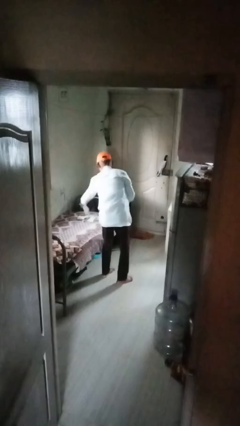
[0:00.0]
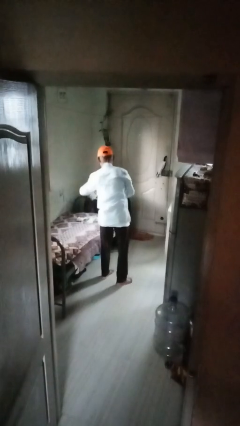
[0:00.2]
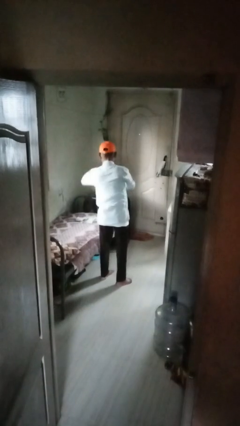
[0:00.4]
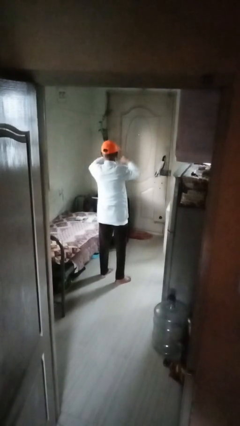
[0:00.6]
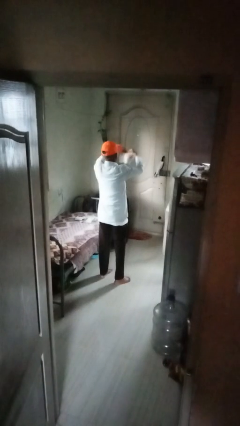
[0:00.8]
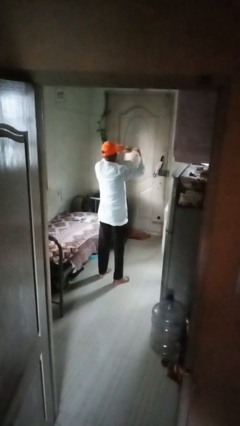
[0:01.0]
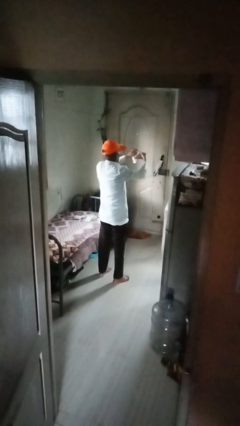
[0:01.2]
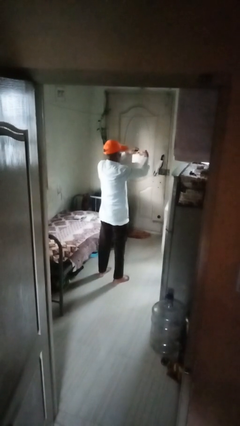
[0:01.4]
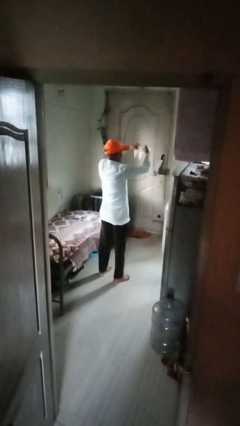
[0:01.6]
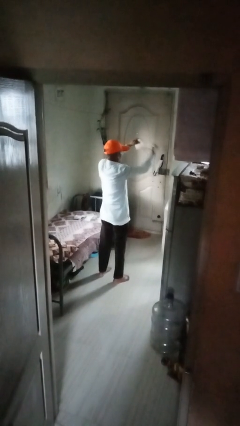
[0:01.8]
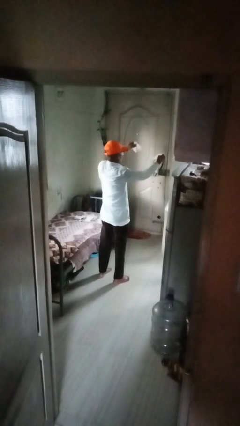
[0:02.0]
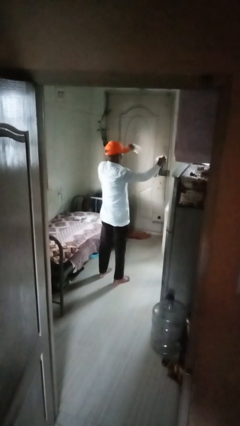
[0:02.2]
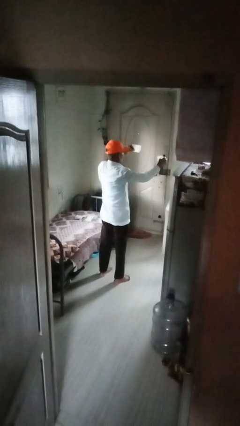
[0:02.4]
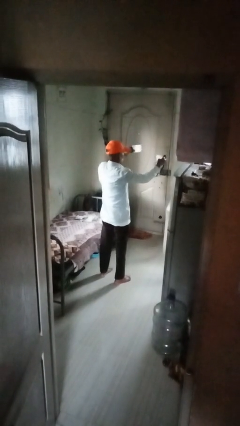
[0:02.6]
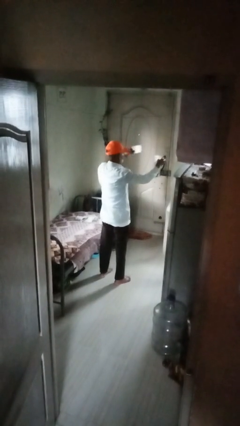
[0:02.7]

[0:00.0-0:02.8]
person tears paper

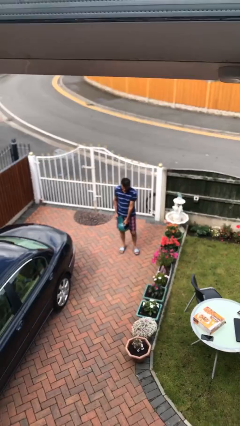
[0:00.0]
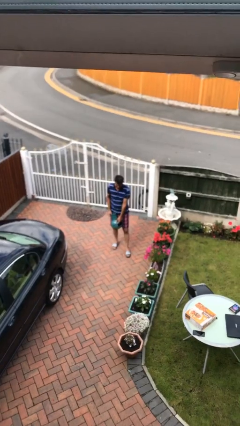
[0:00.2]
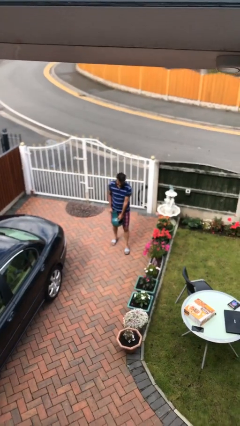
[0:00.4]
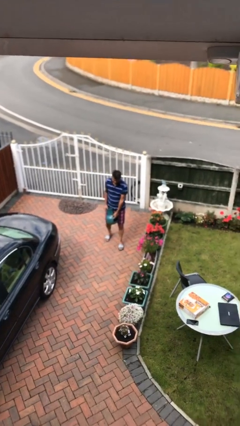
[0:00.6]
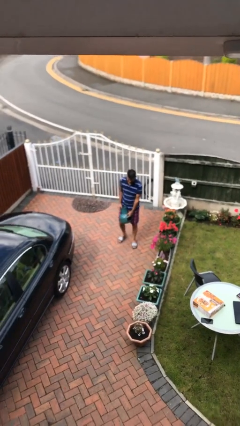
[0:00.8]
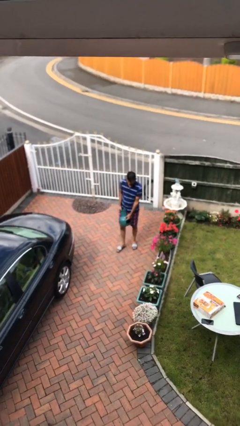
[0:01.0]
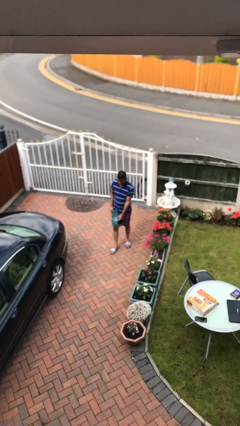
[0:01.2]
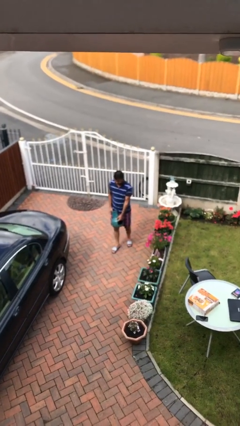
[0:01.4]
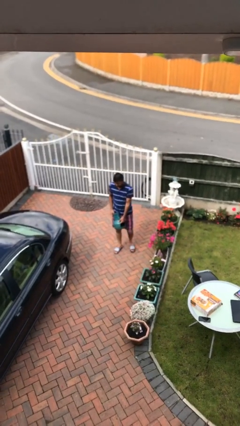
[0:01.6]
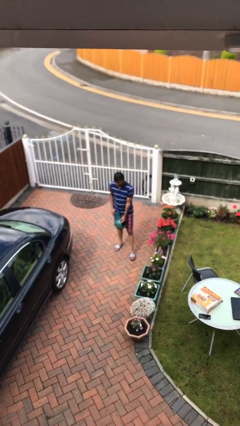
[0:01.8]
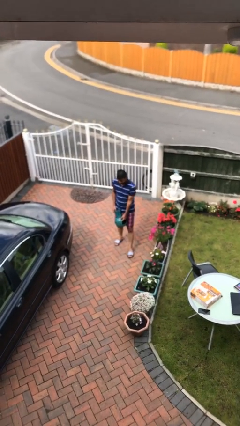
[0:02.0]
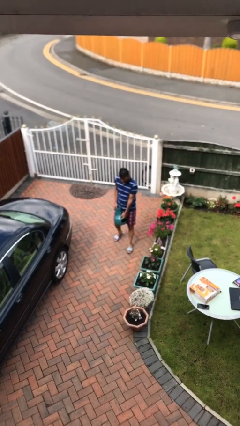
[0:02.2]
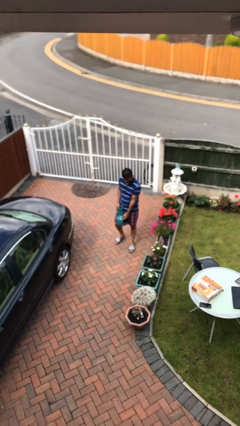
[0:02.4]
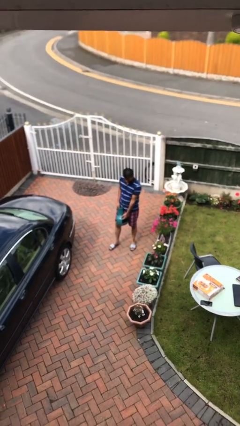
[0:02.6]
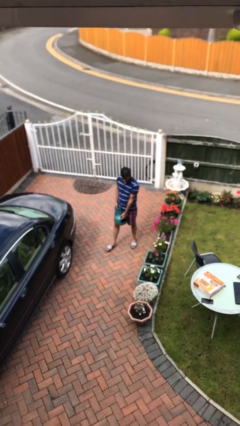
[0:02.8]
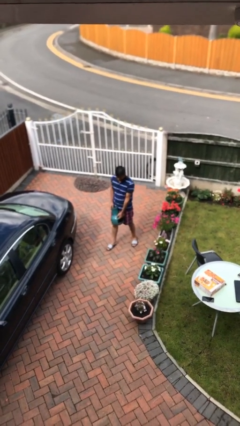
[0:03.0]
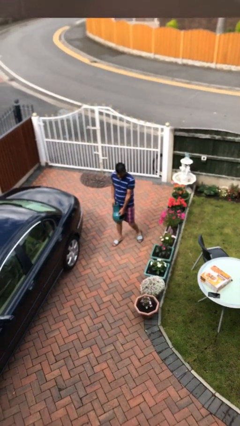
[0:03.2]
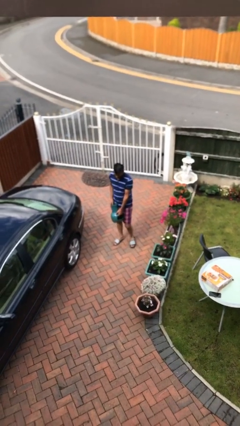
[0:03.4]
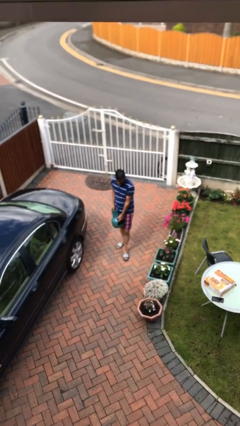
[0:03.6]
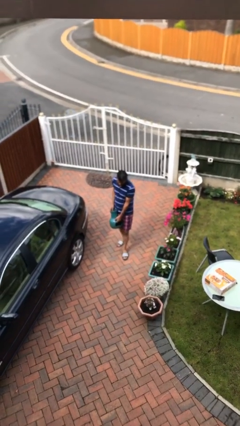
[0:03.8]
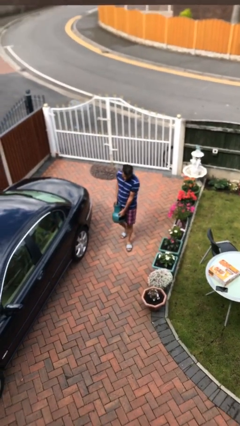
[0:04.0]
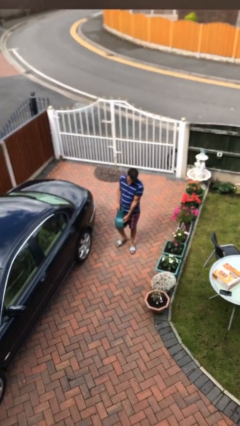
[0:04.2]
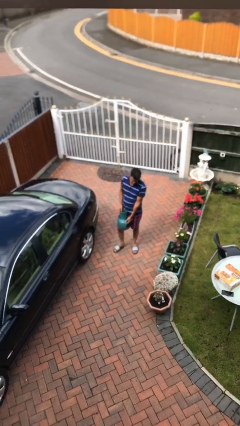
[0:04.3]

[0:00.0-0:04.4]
person carries heavy object

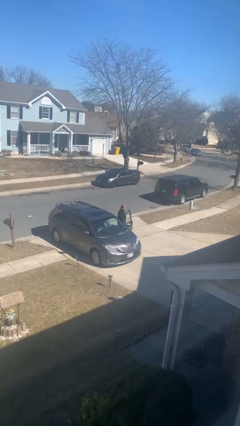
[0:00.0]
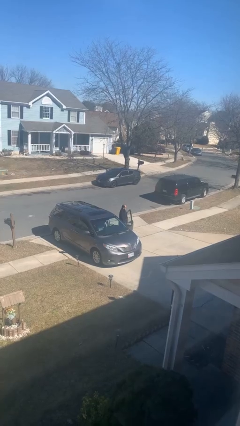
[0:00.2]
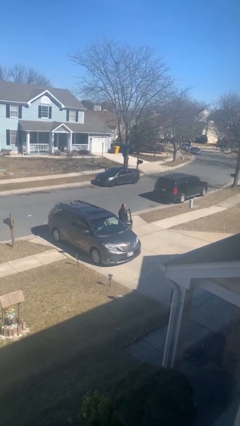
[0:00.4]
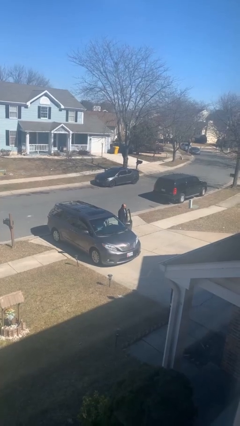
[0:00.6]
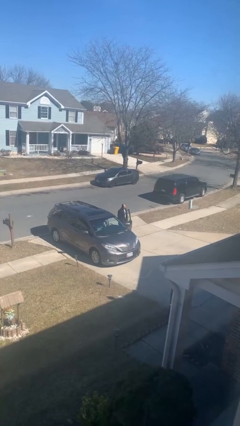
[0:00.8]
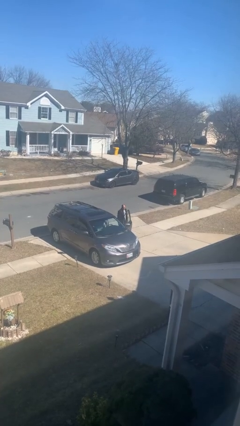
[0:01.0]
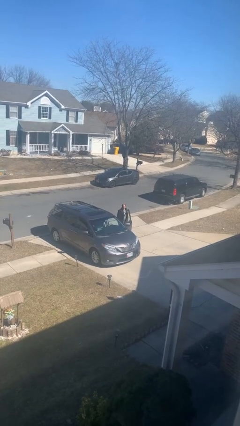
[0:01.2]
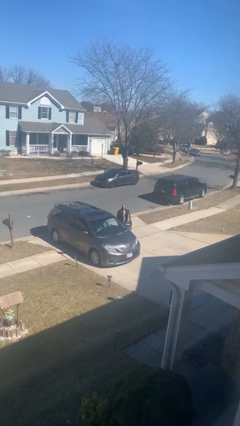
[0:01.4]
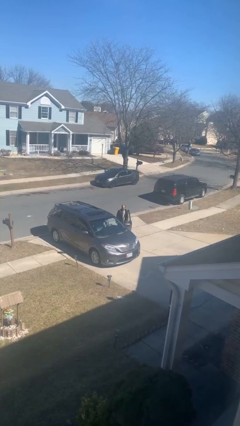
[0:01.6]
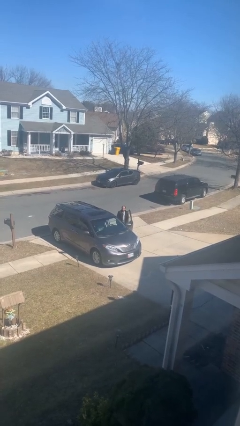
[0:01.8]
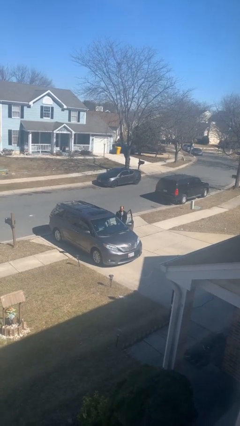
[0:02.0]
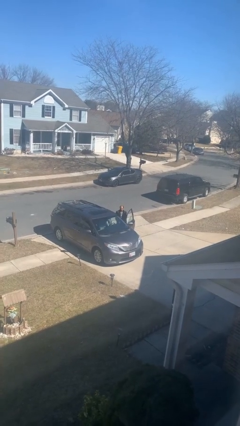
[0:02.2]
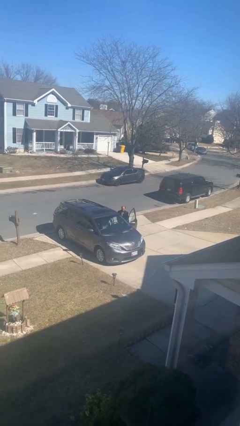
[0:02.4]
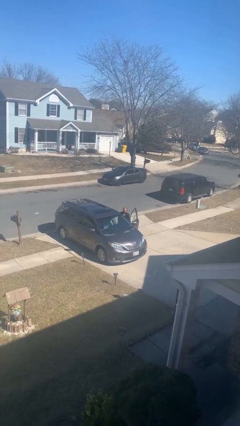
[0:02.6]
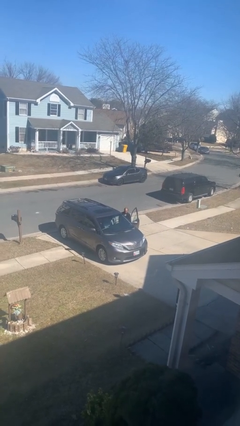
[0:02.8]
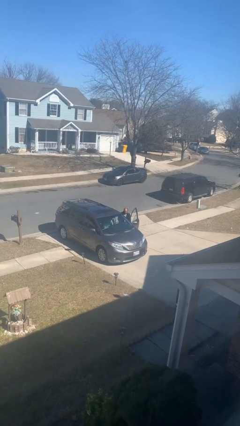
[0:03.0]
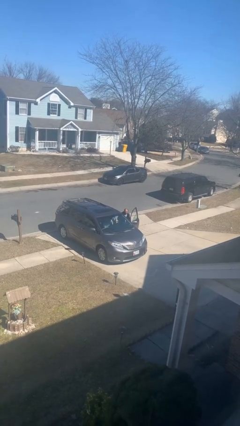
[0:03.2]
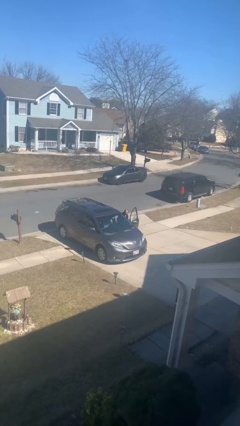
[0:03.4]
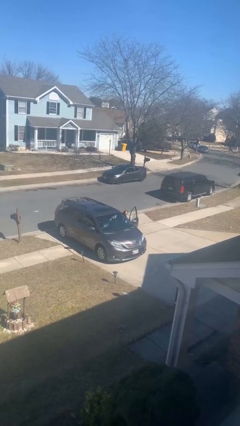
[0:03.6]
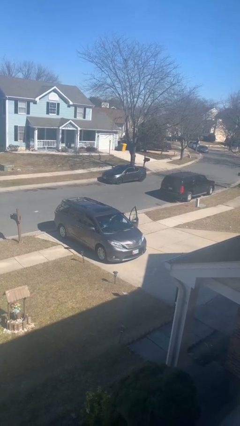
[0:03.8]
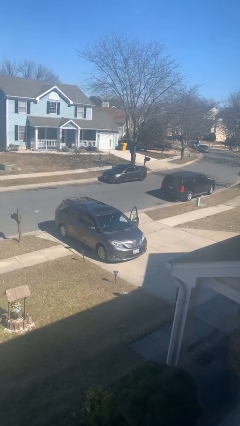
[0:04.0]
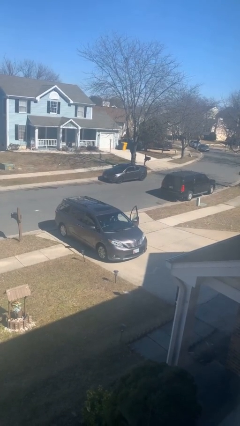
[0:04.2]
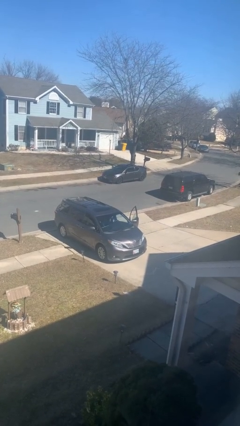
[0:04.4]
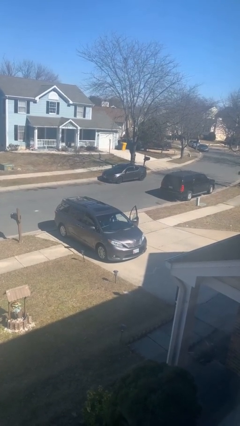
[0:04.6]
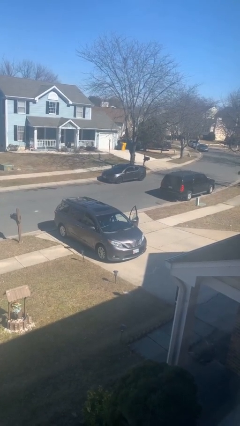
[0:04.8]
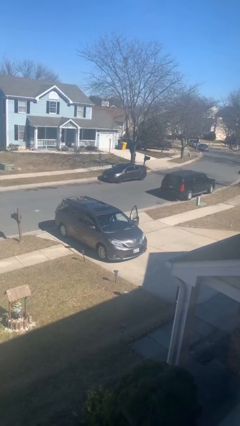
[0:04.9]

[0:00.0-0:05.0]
person enters car

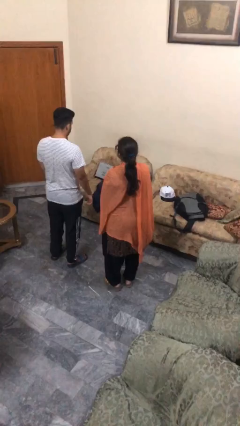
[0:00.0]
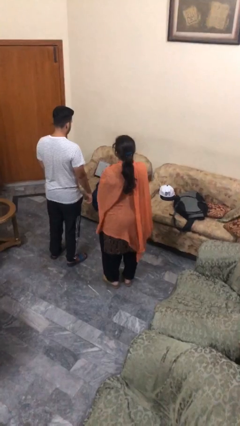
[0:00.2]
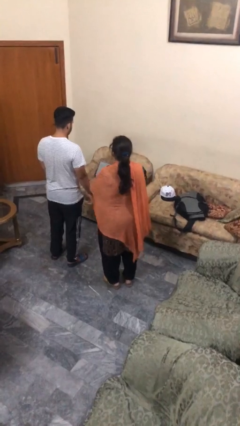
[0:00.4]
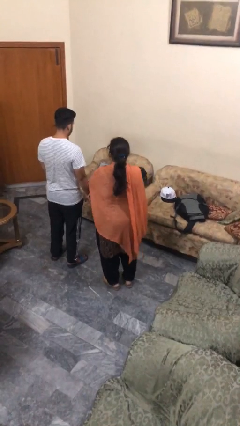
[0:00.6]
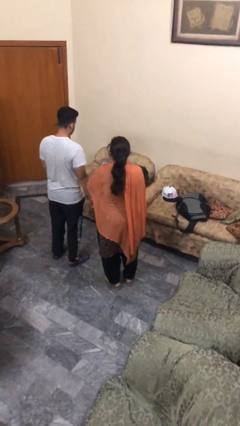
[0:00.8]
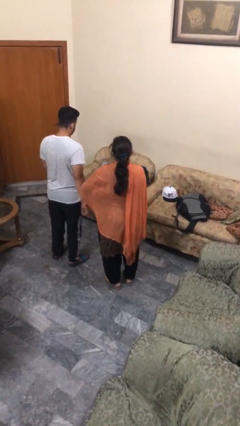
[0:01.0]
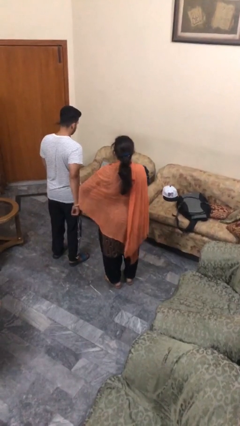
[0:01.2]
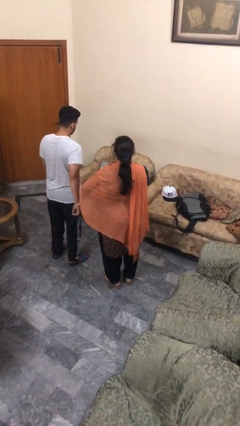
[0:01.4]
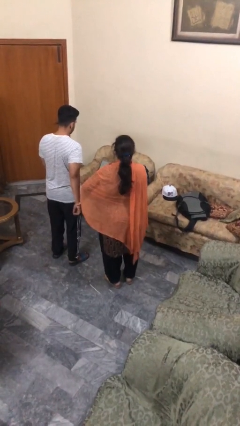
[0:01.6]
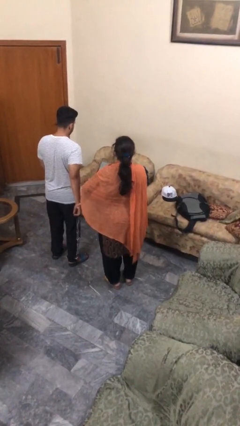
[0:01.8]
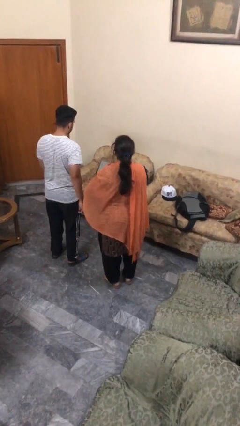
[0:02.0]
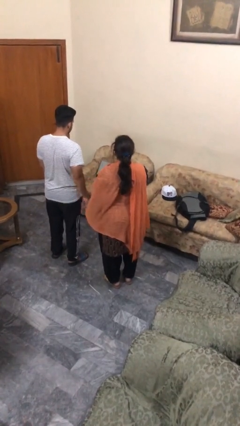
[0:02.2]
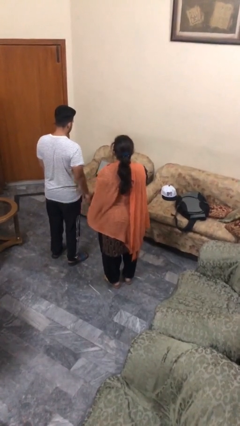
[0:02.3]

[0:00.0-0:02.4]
person grabs person by forearm

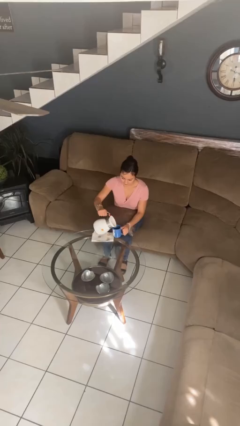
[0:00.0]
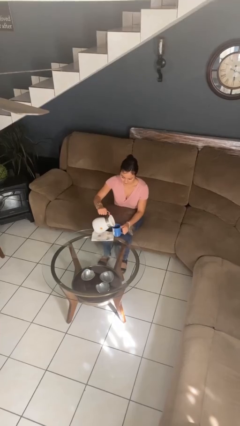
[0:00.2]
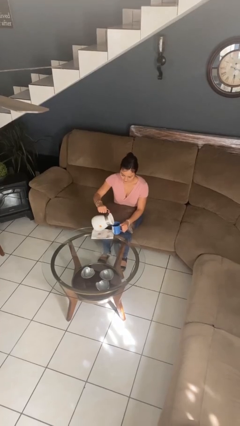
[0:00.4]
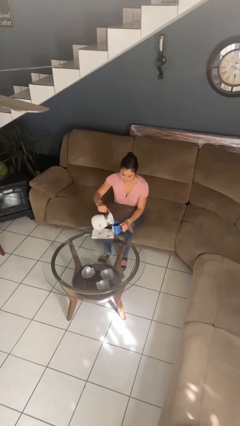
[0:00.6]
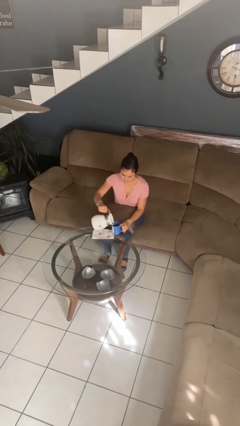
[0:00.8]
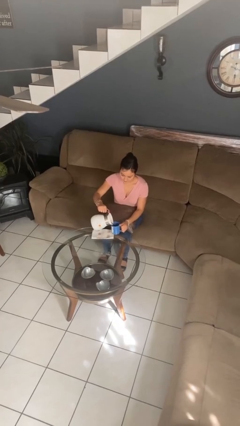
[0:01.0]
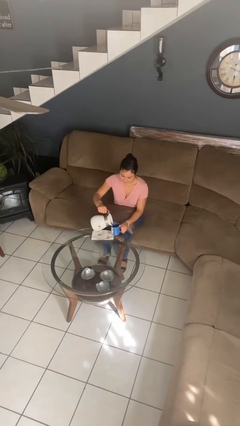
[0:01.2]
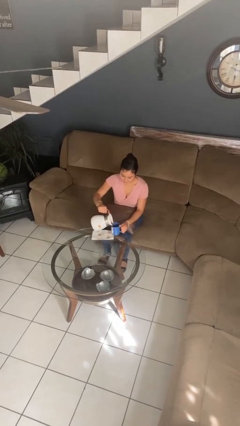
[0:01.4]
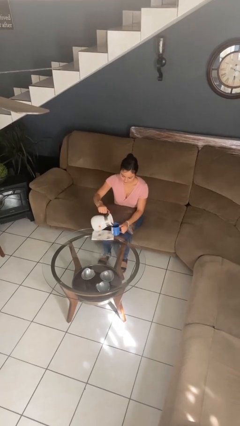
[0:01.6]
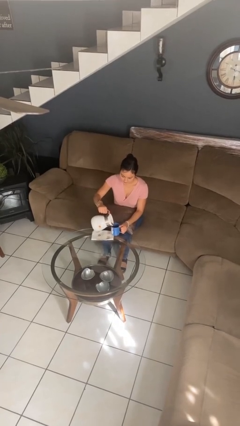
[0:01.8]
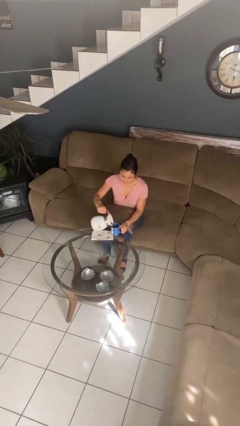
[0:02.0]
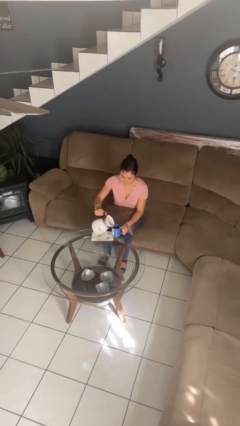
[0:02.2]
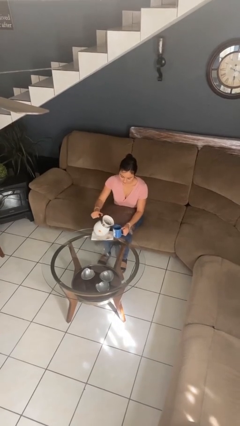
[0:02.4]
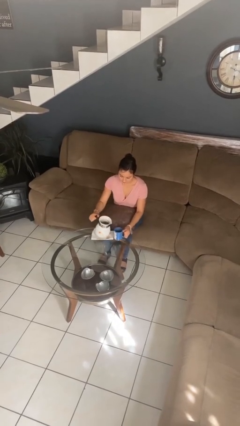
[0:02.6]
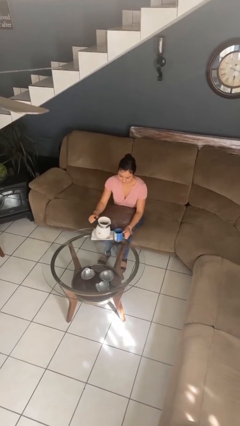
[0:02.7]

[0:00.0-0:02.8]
person pours coffee into mug
